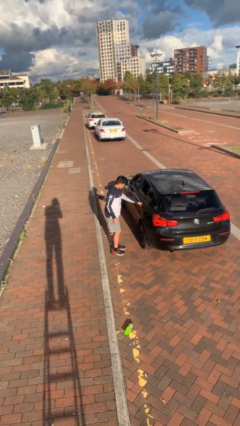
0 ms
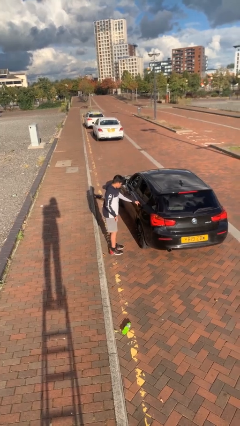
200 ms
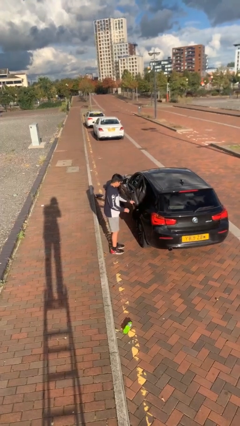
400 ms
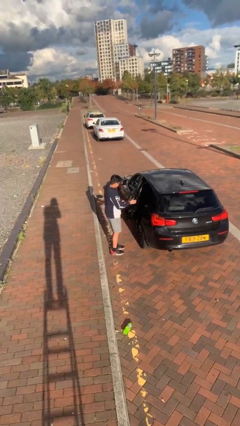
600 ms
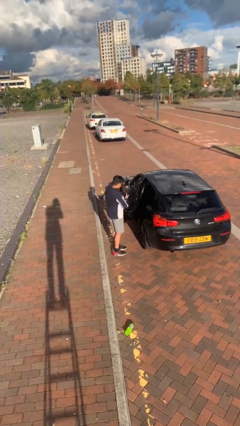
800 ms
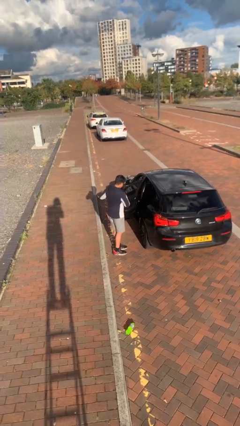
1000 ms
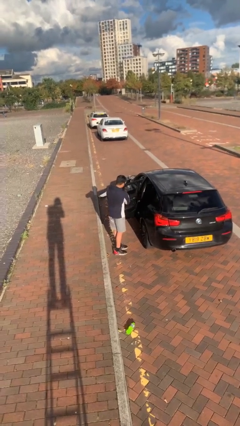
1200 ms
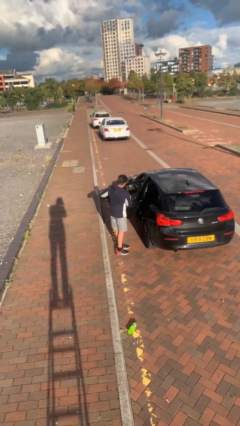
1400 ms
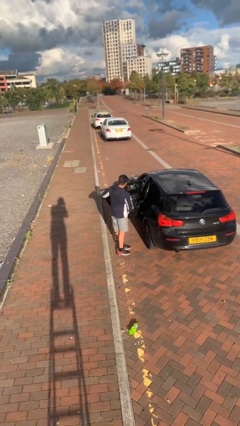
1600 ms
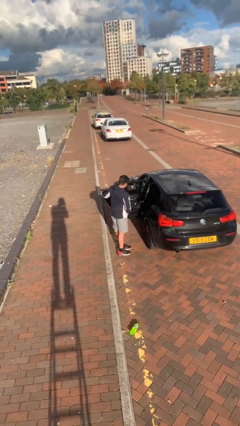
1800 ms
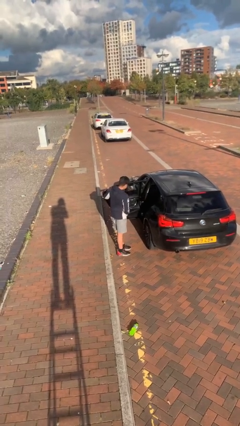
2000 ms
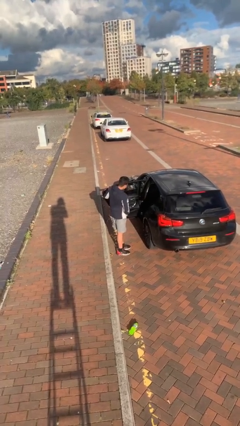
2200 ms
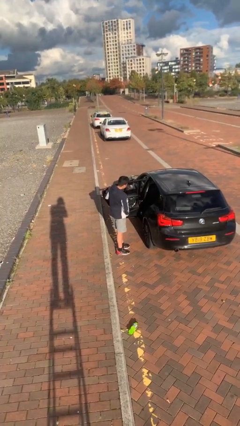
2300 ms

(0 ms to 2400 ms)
person opens car door

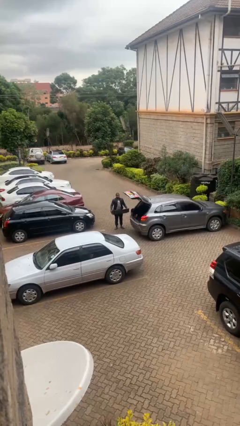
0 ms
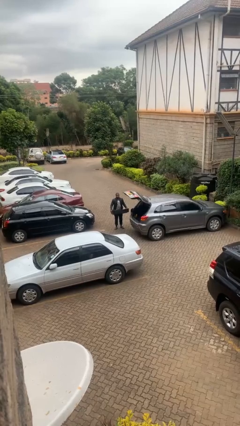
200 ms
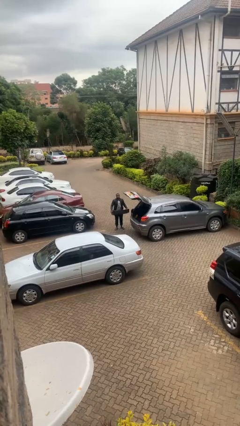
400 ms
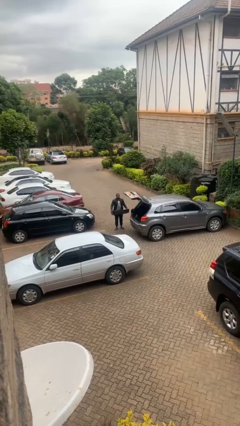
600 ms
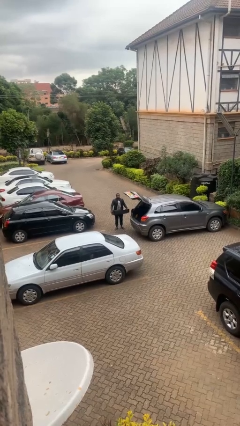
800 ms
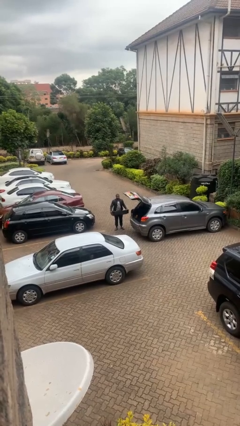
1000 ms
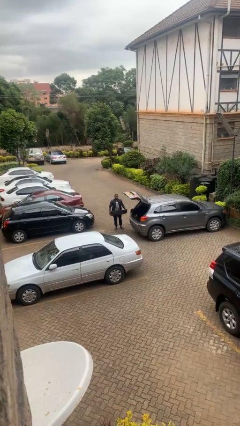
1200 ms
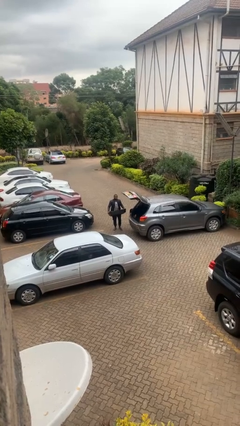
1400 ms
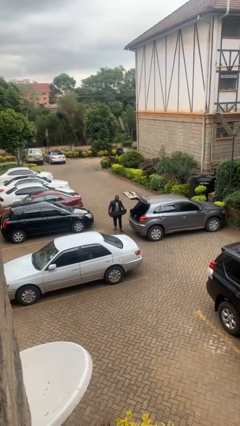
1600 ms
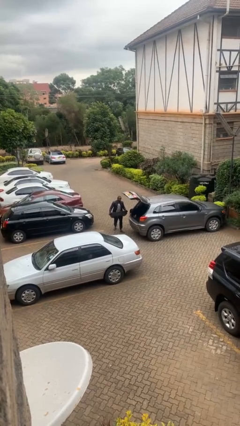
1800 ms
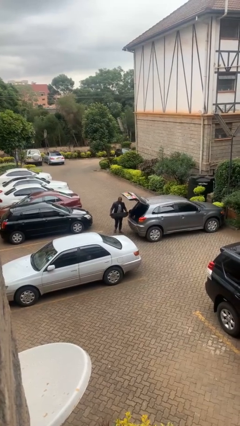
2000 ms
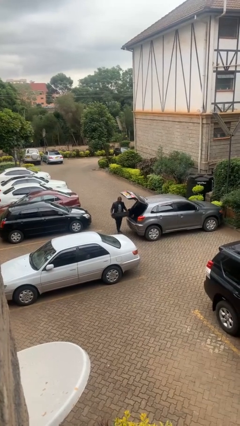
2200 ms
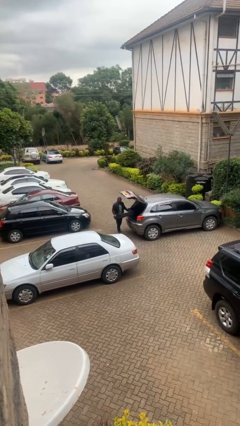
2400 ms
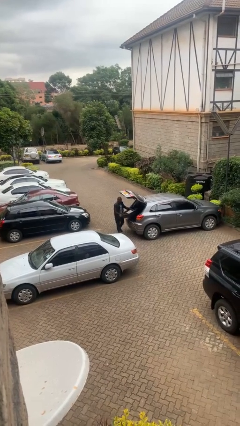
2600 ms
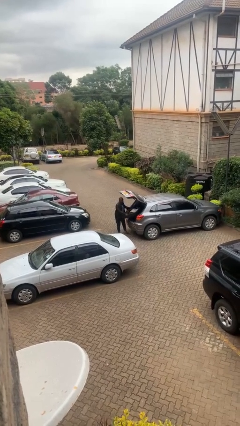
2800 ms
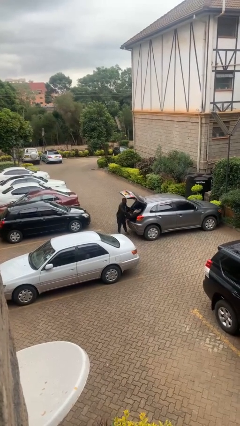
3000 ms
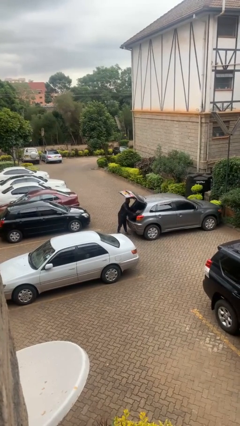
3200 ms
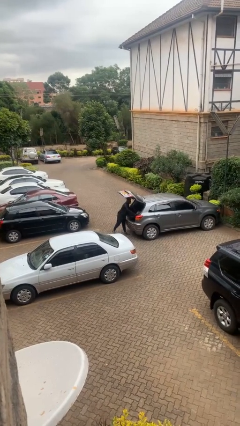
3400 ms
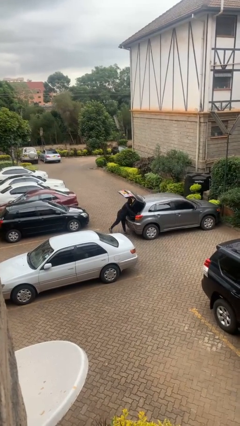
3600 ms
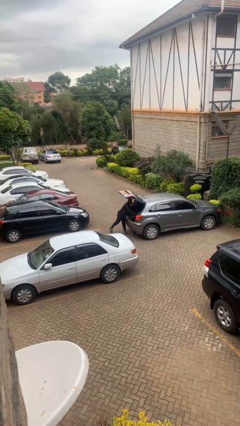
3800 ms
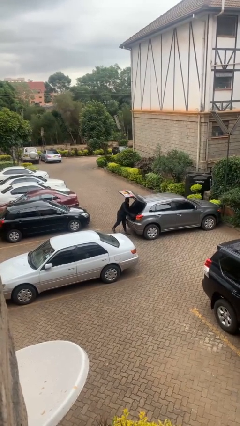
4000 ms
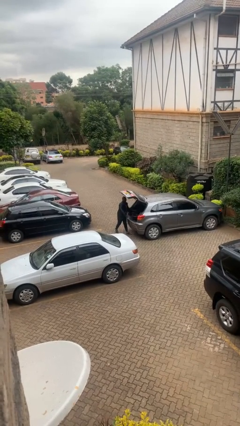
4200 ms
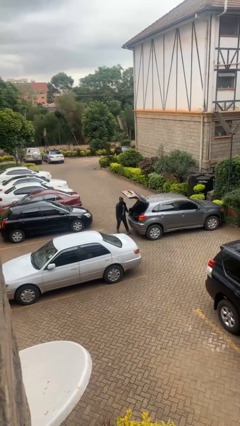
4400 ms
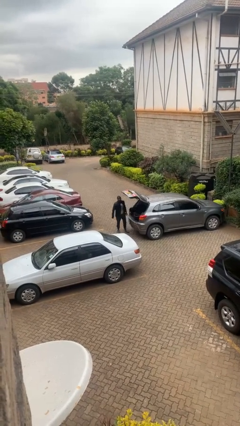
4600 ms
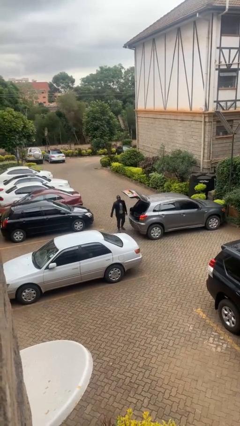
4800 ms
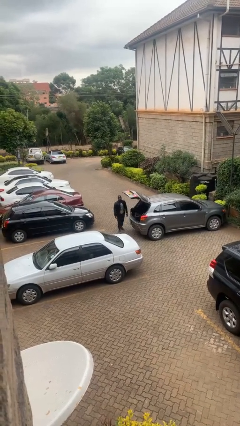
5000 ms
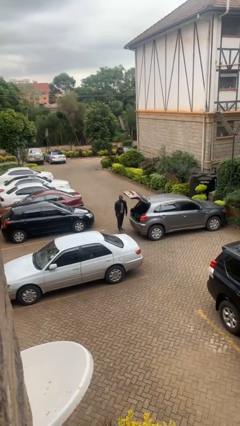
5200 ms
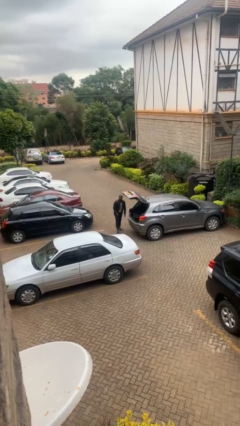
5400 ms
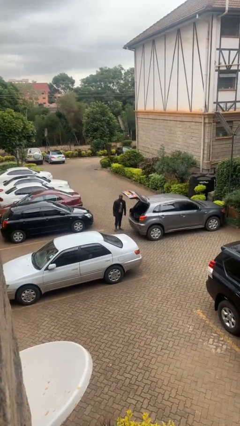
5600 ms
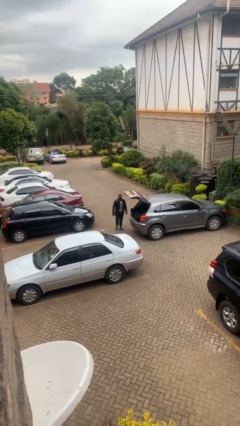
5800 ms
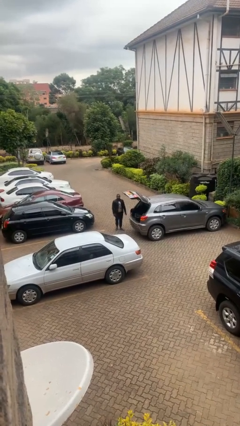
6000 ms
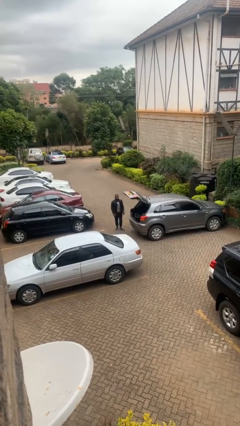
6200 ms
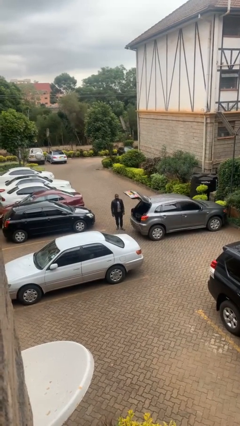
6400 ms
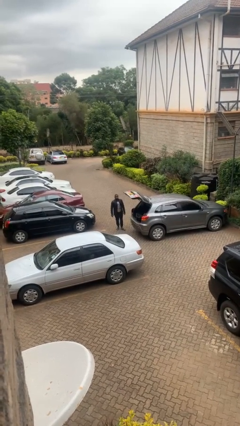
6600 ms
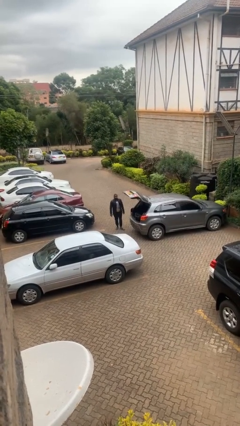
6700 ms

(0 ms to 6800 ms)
person loads car

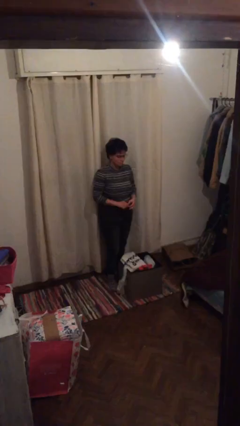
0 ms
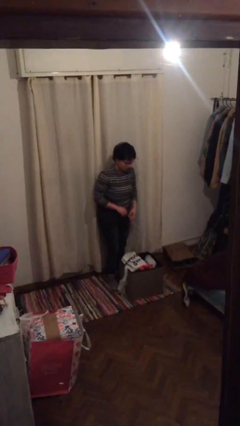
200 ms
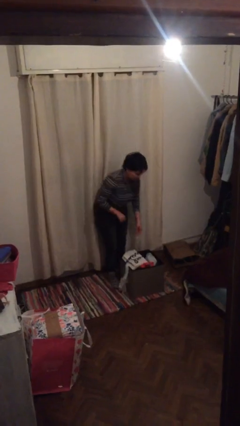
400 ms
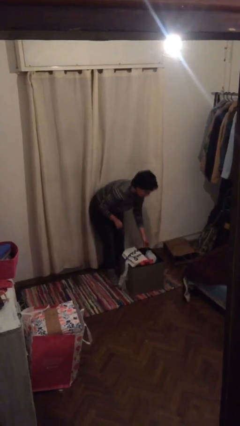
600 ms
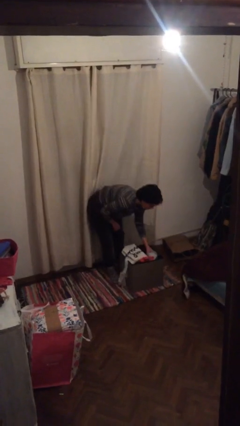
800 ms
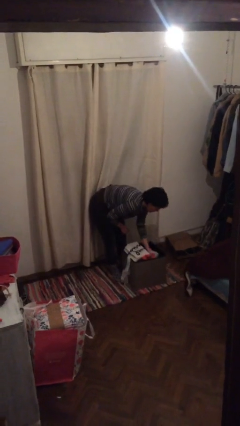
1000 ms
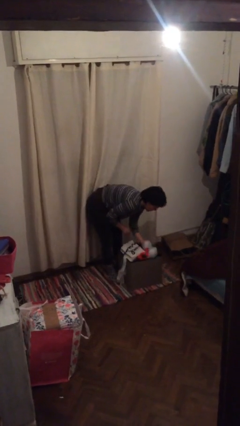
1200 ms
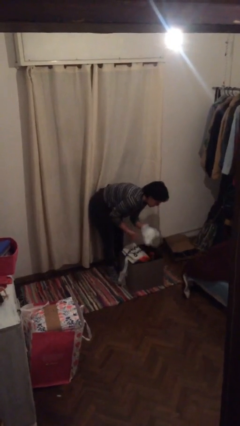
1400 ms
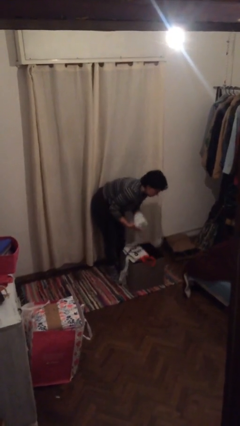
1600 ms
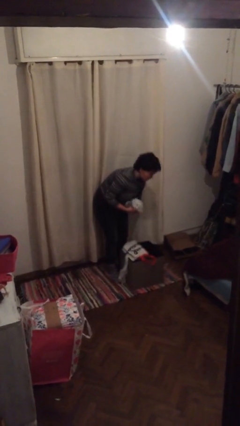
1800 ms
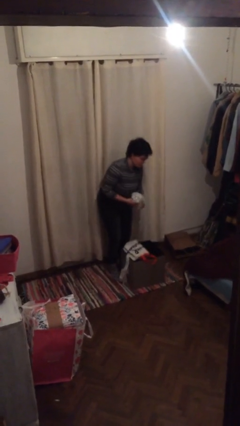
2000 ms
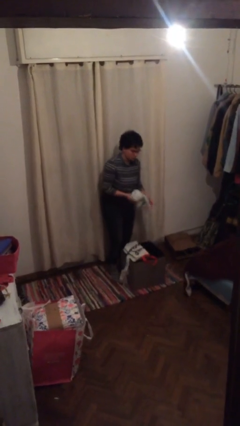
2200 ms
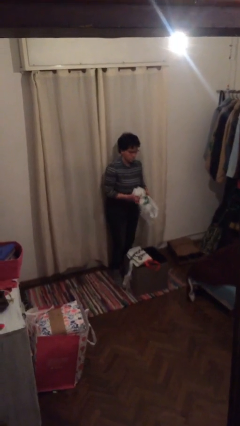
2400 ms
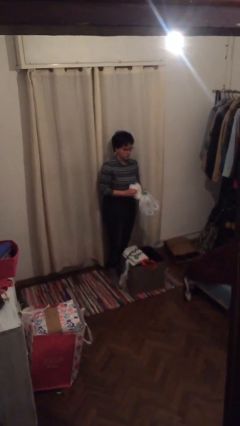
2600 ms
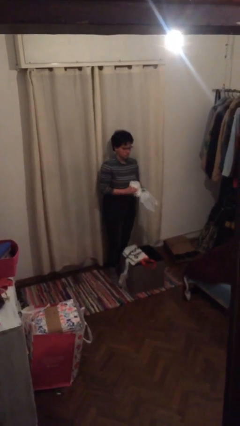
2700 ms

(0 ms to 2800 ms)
person takes object from basket

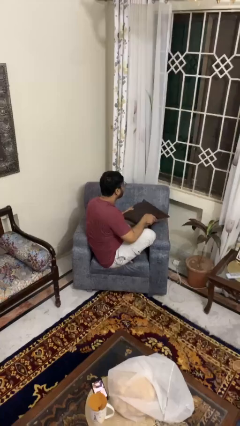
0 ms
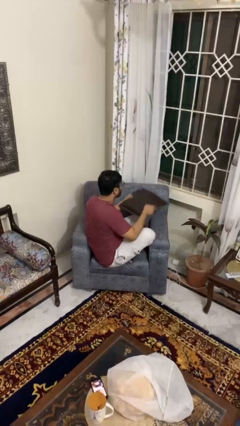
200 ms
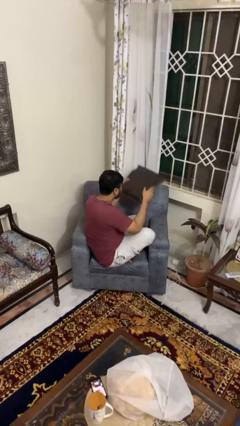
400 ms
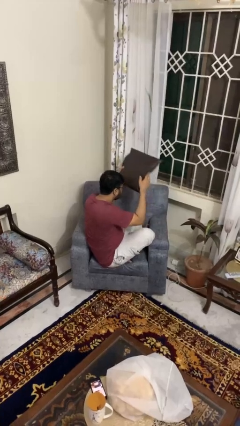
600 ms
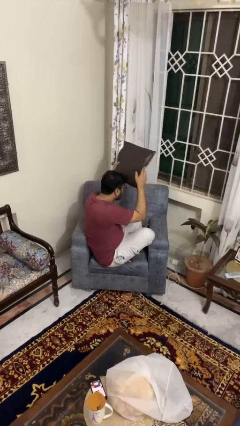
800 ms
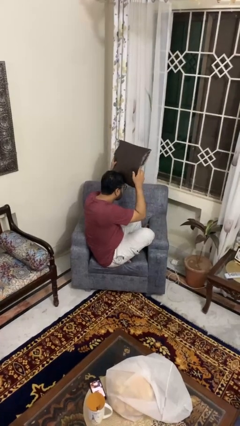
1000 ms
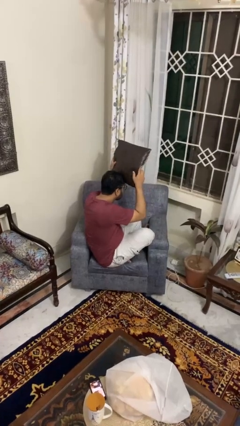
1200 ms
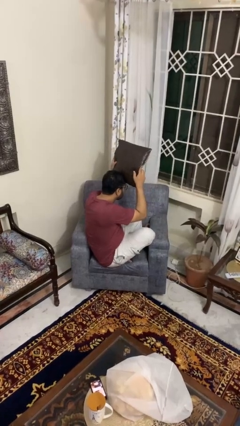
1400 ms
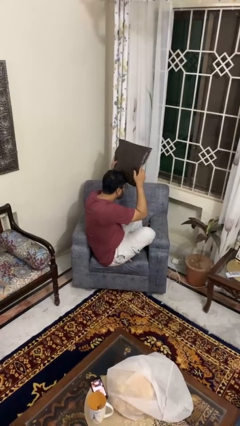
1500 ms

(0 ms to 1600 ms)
person holds object above head

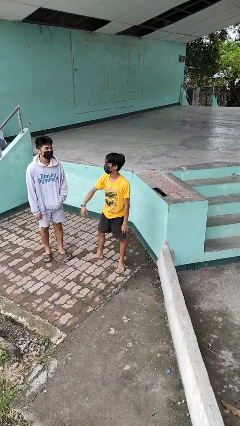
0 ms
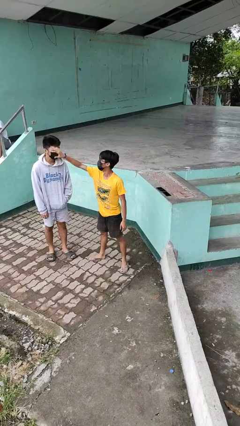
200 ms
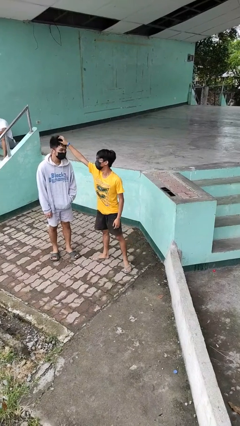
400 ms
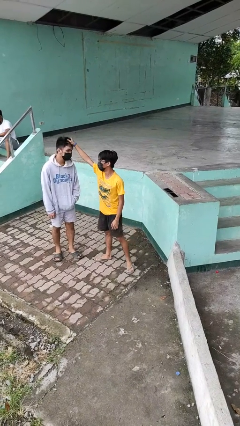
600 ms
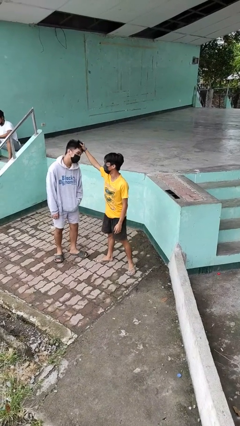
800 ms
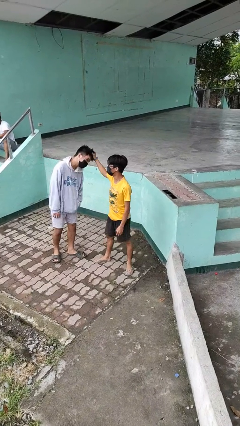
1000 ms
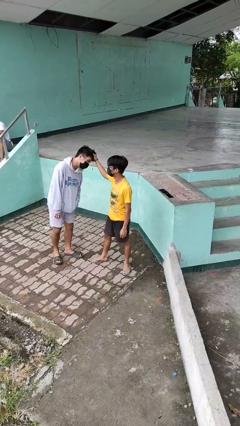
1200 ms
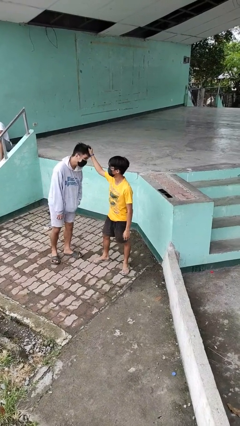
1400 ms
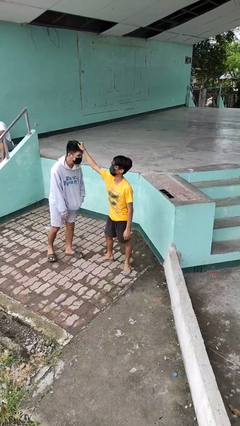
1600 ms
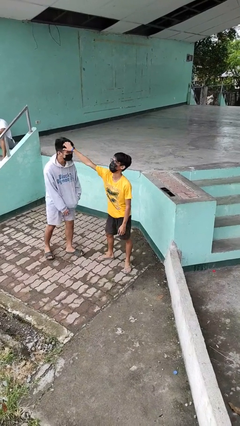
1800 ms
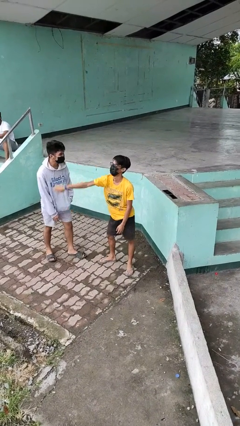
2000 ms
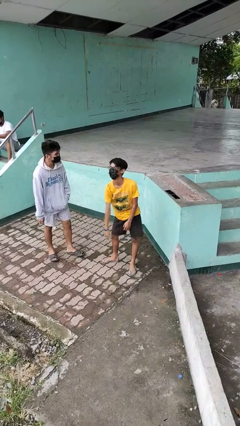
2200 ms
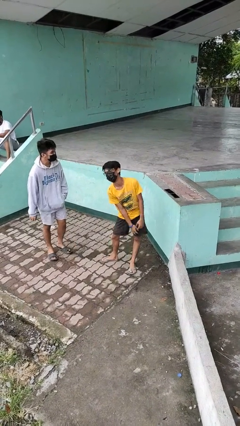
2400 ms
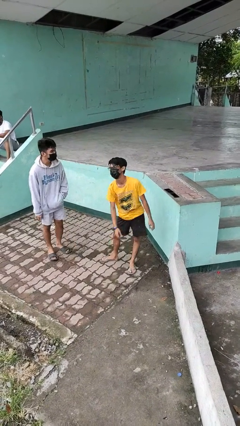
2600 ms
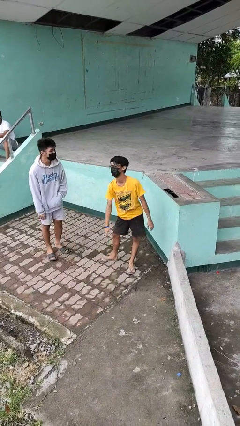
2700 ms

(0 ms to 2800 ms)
person grabs person by hair

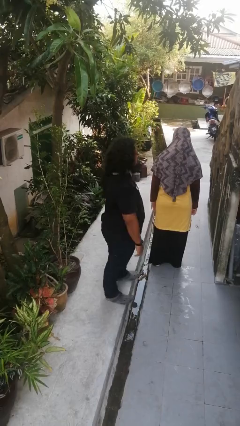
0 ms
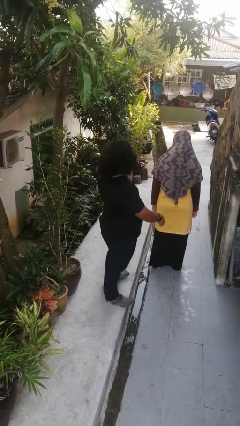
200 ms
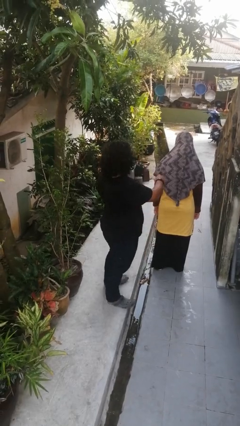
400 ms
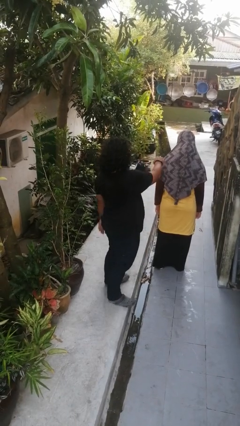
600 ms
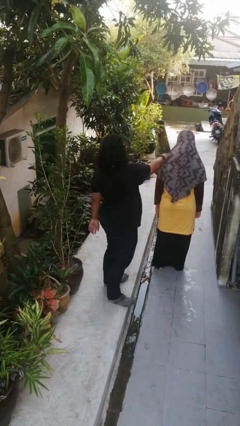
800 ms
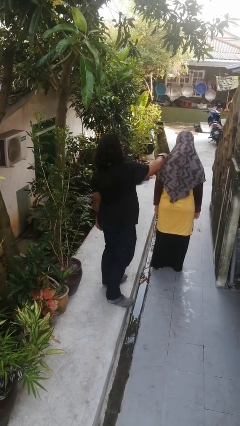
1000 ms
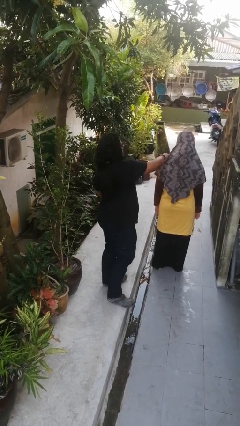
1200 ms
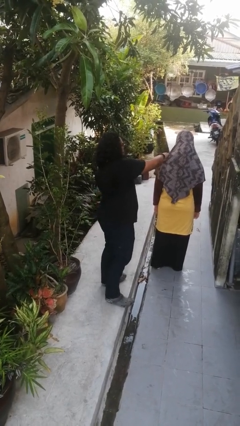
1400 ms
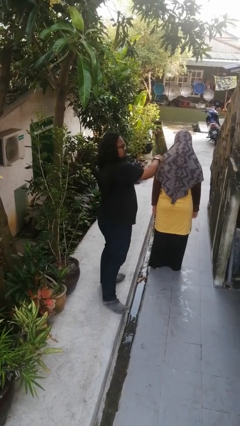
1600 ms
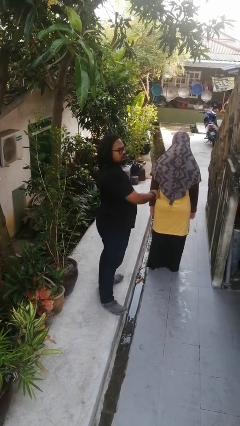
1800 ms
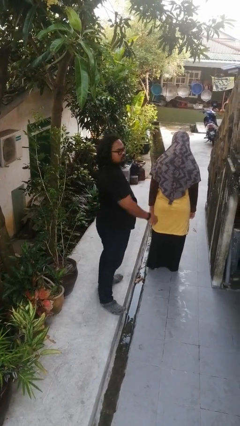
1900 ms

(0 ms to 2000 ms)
person touches back of person
